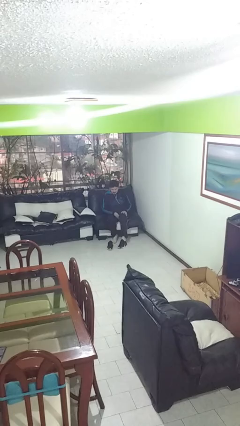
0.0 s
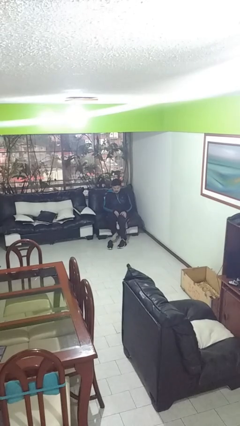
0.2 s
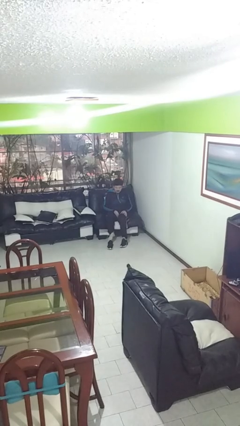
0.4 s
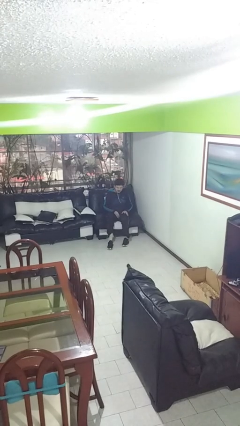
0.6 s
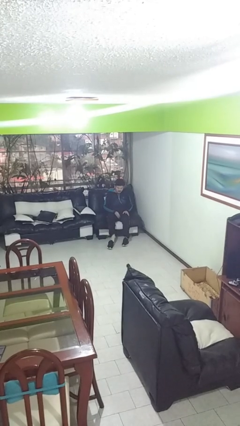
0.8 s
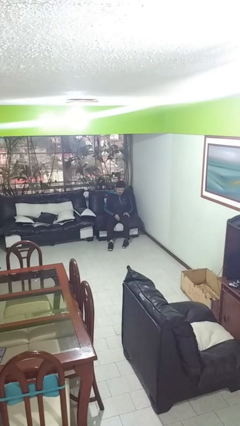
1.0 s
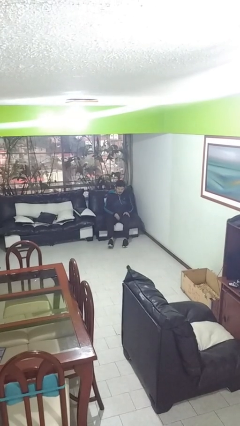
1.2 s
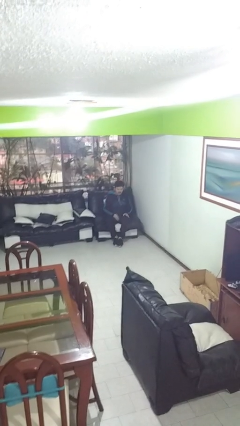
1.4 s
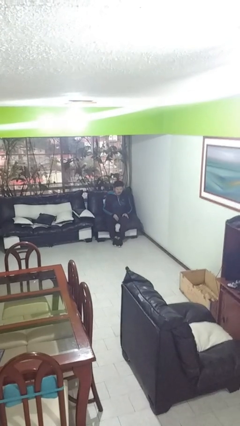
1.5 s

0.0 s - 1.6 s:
person puts on shoes

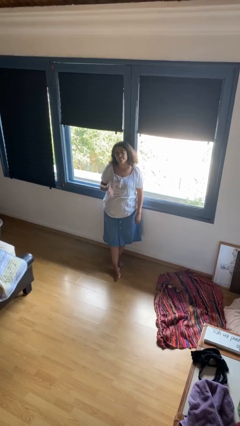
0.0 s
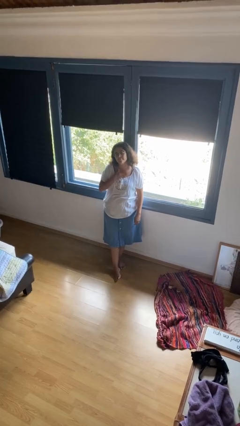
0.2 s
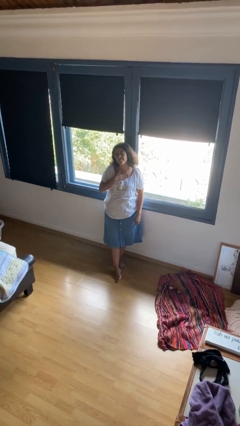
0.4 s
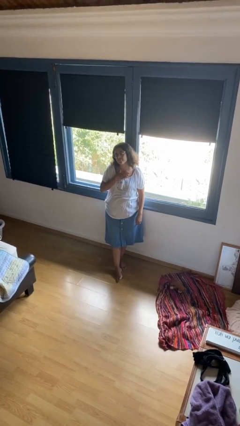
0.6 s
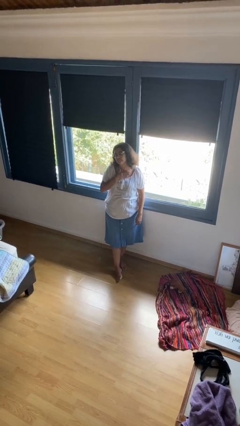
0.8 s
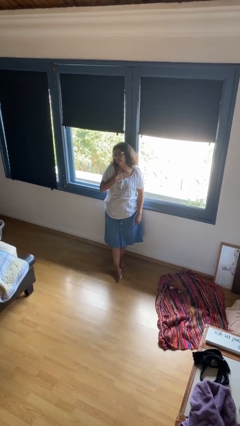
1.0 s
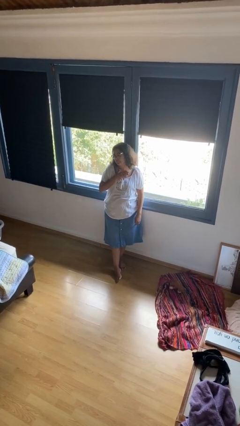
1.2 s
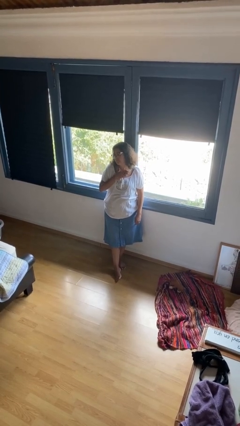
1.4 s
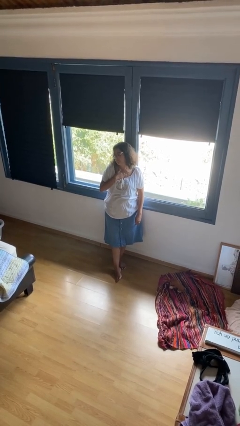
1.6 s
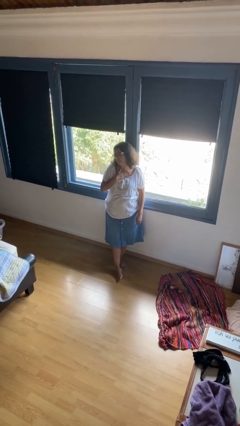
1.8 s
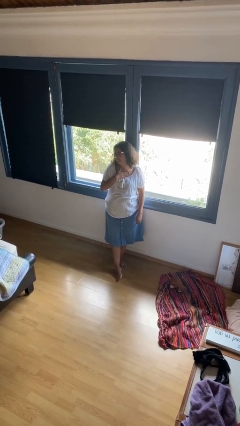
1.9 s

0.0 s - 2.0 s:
person drums on chest

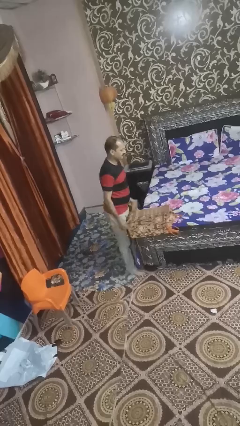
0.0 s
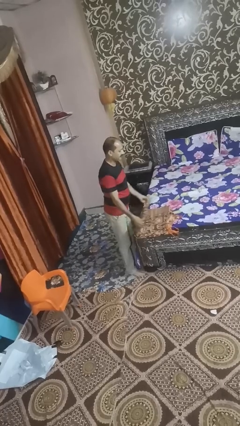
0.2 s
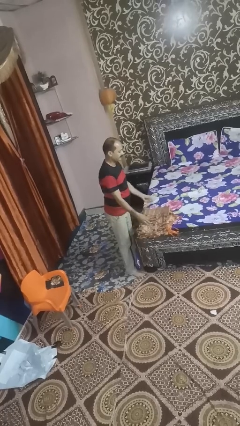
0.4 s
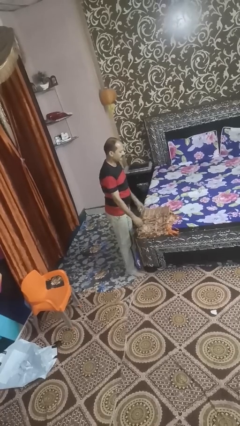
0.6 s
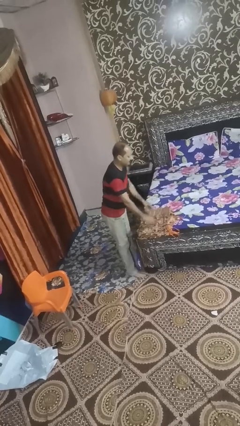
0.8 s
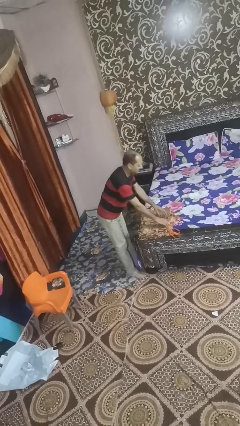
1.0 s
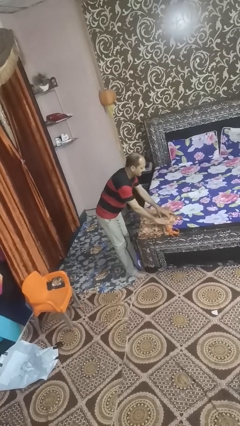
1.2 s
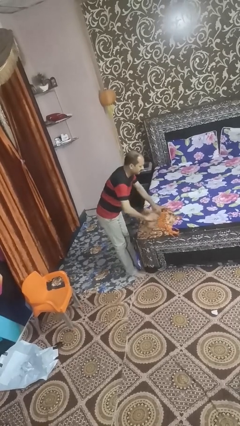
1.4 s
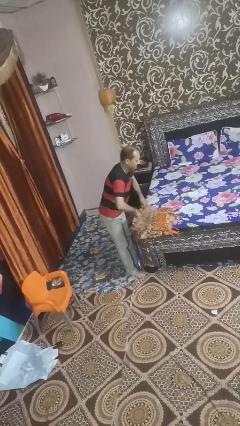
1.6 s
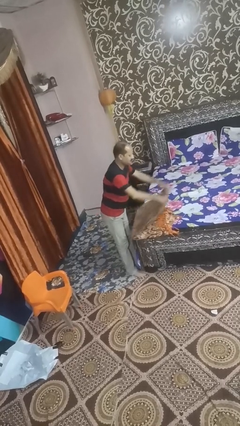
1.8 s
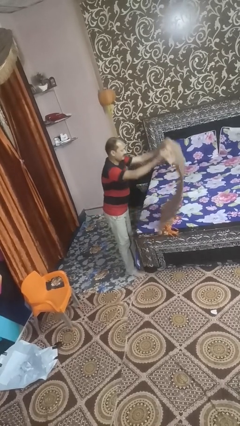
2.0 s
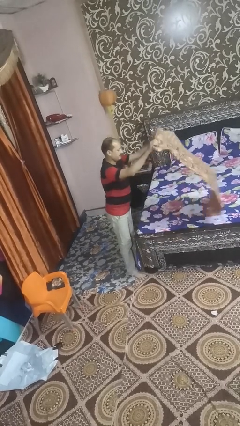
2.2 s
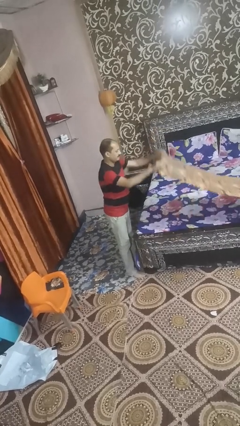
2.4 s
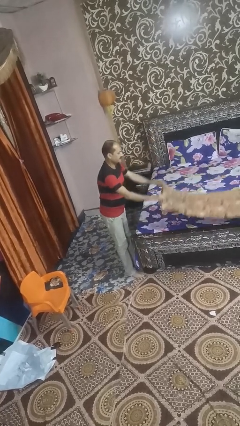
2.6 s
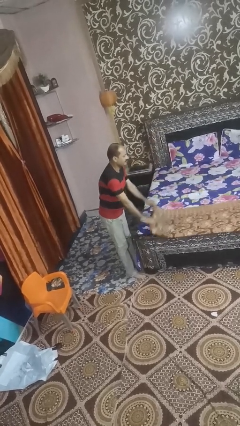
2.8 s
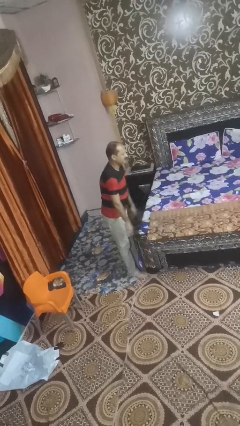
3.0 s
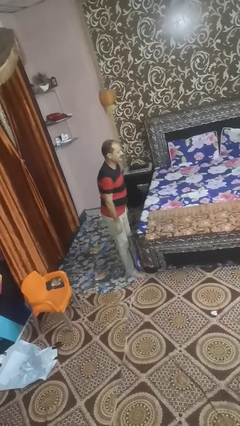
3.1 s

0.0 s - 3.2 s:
person unfolds blanket

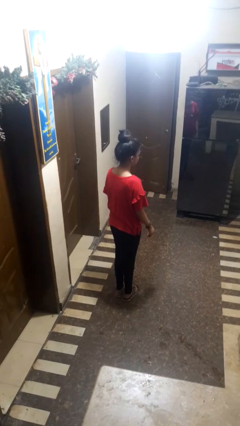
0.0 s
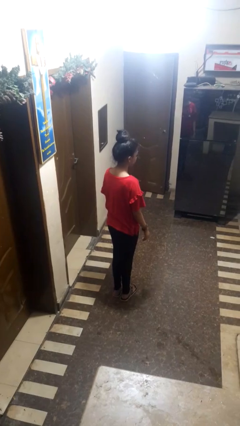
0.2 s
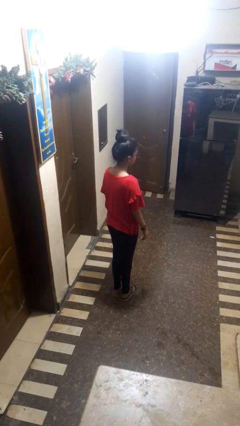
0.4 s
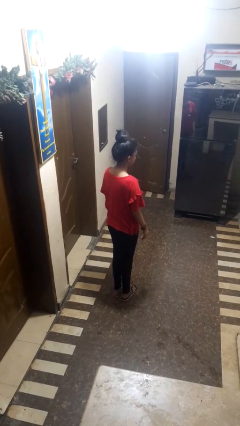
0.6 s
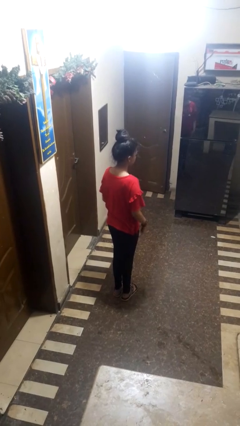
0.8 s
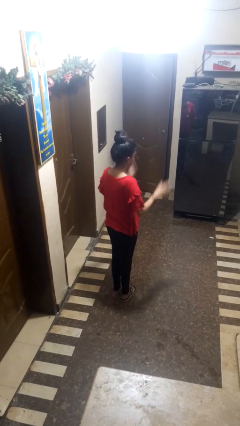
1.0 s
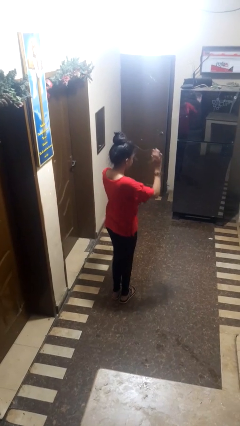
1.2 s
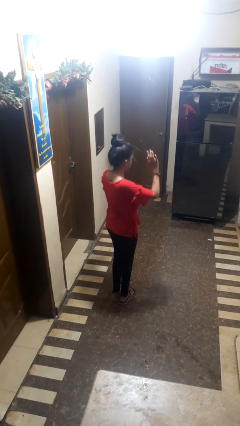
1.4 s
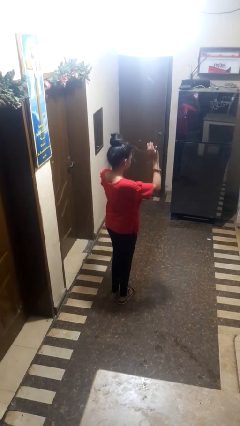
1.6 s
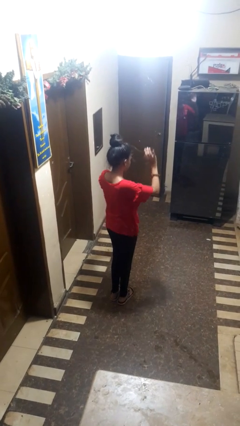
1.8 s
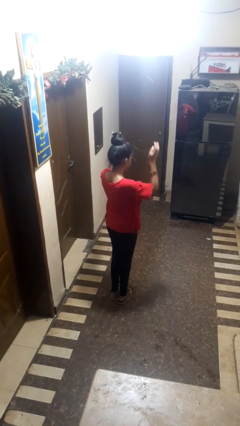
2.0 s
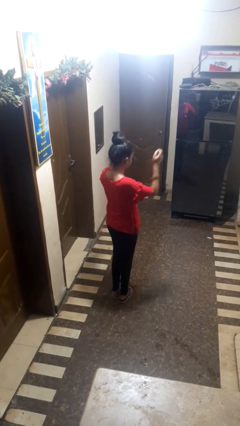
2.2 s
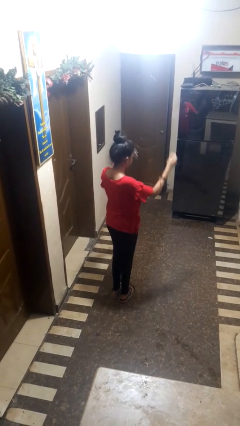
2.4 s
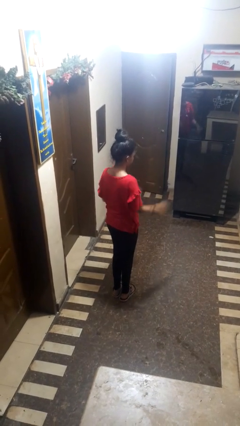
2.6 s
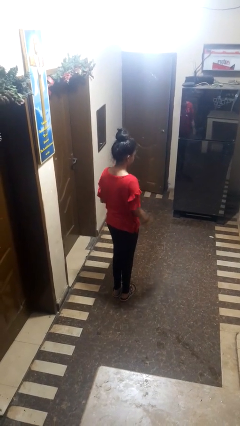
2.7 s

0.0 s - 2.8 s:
person dances in place

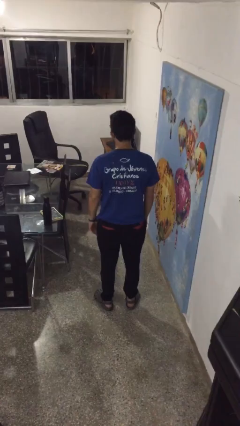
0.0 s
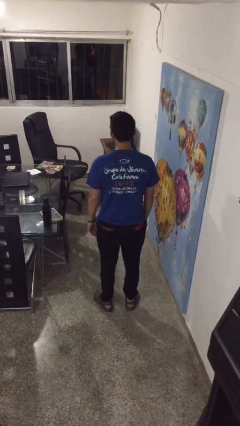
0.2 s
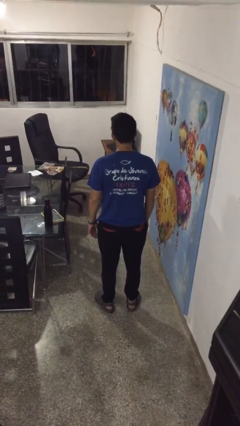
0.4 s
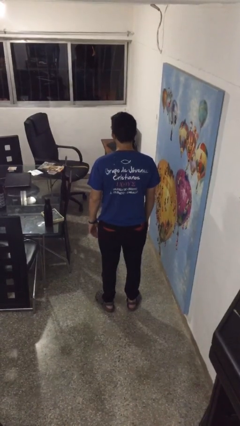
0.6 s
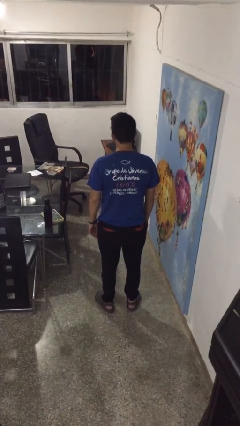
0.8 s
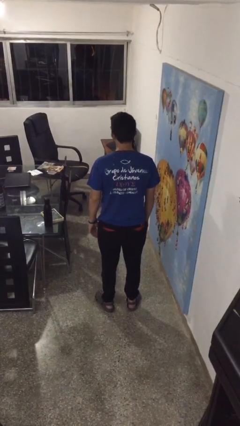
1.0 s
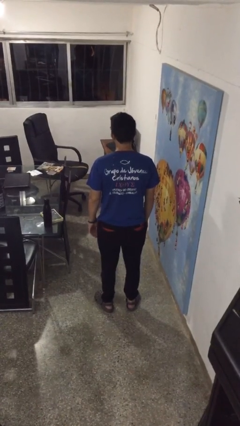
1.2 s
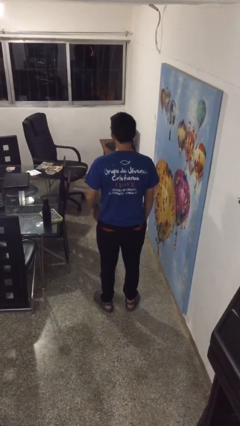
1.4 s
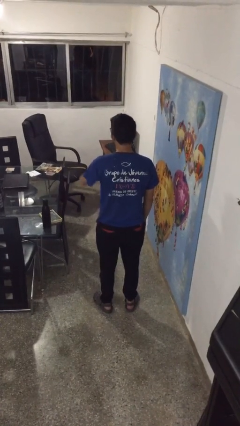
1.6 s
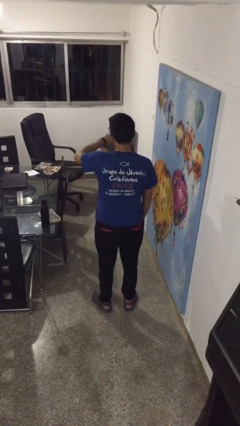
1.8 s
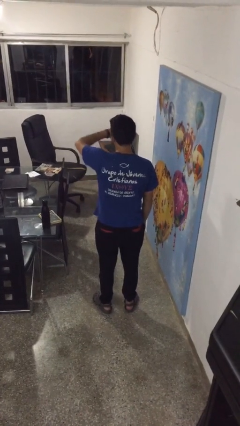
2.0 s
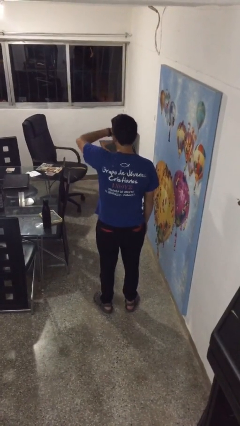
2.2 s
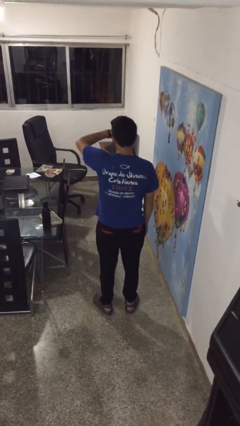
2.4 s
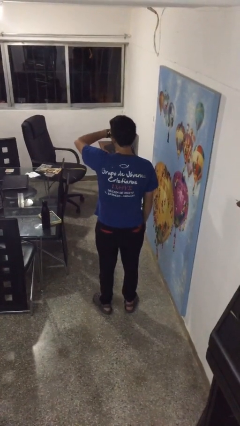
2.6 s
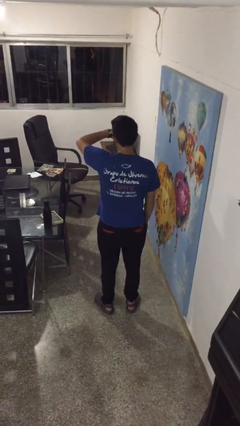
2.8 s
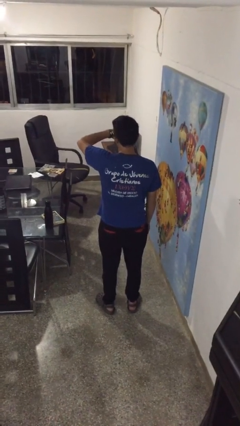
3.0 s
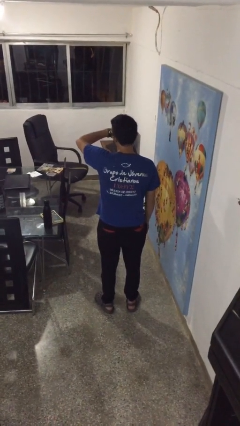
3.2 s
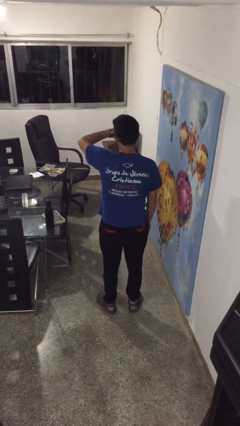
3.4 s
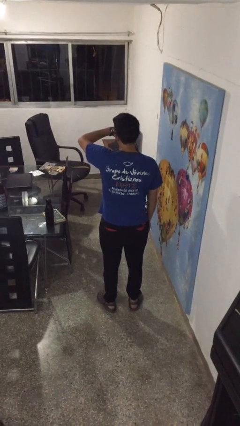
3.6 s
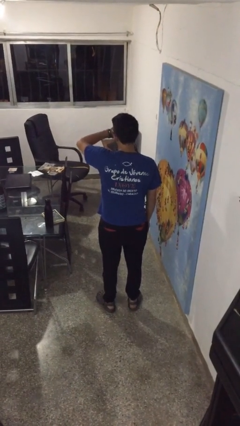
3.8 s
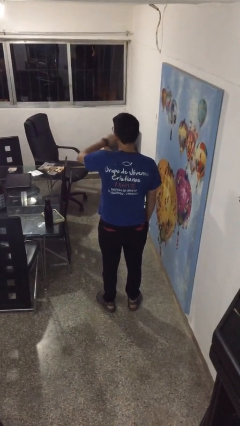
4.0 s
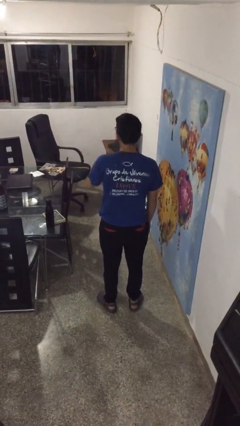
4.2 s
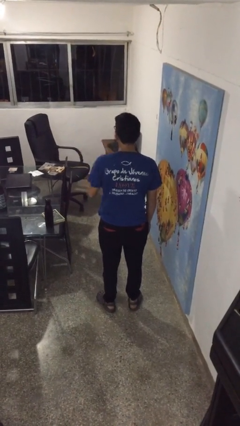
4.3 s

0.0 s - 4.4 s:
person looks at wristwatch

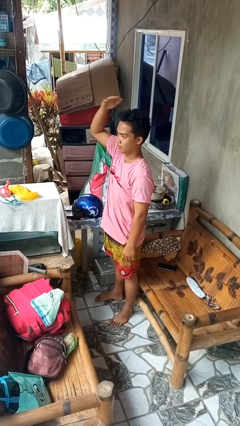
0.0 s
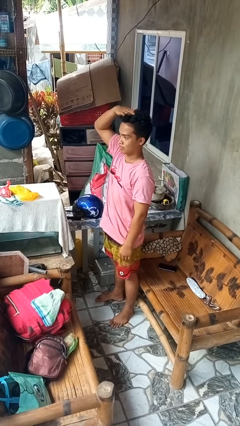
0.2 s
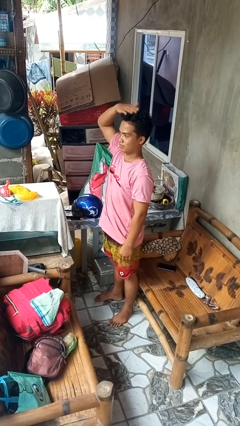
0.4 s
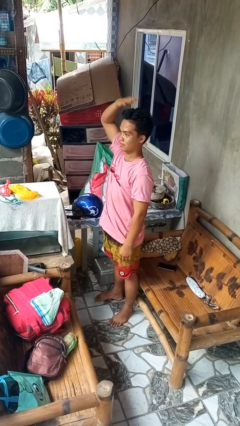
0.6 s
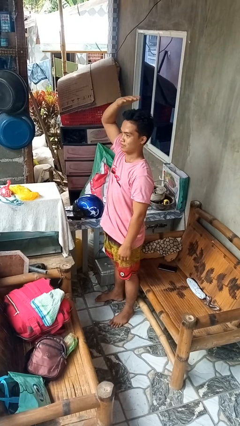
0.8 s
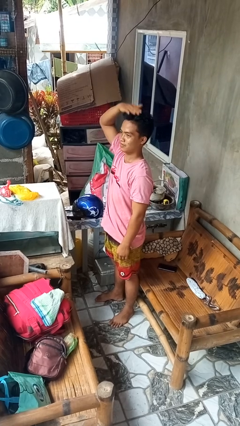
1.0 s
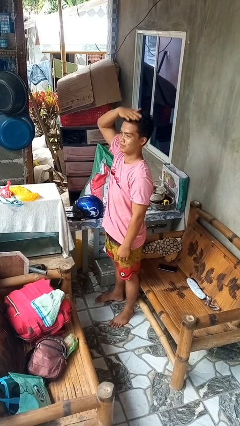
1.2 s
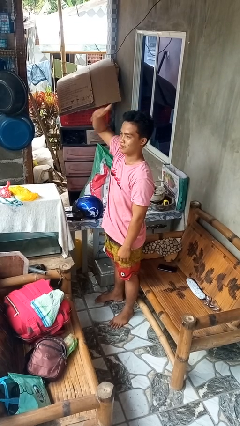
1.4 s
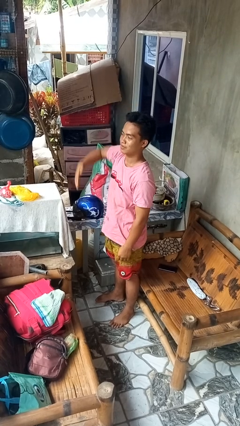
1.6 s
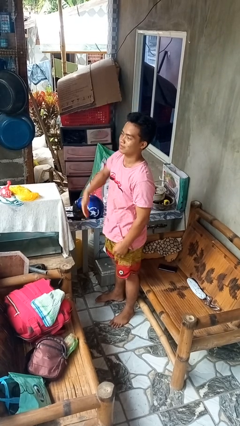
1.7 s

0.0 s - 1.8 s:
person pats head

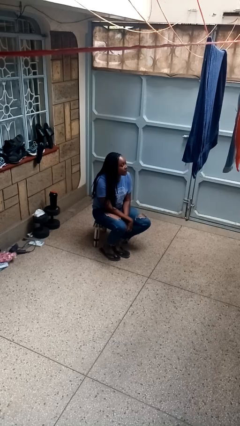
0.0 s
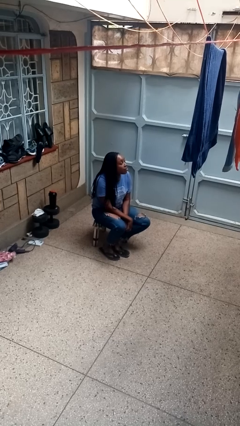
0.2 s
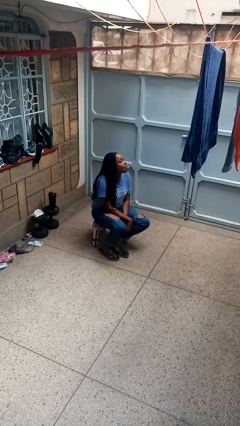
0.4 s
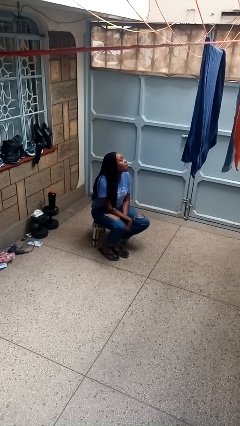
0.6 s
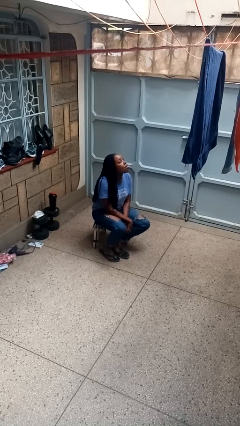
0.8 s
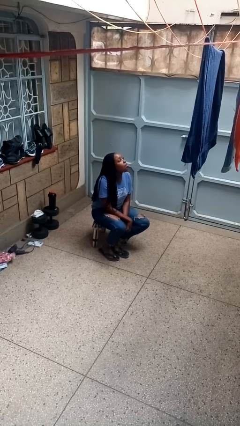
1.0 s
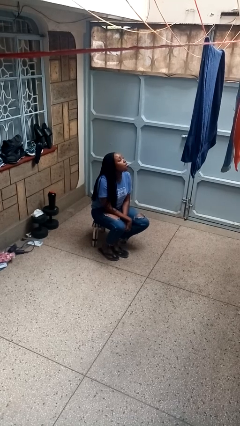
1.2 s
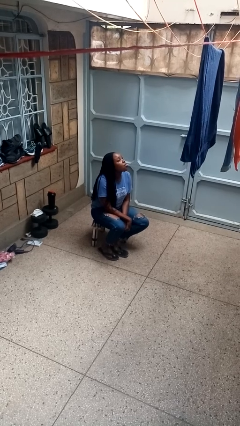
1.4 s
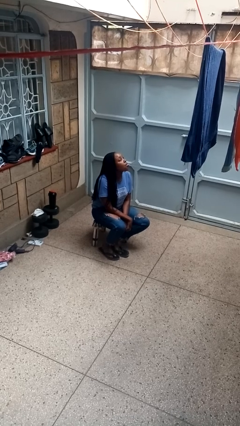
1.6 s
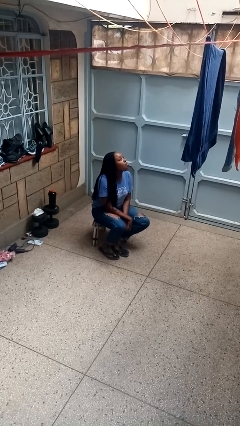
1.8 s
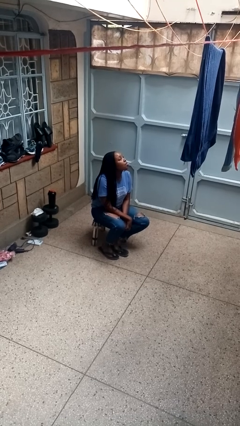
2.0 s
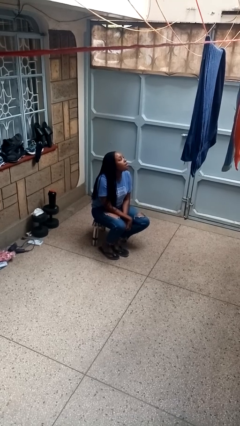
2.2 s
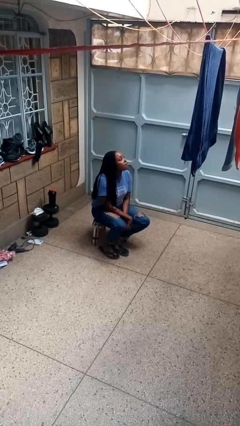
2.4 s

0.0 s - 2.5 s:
person sticks out tongue
